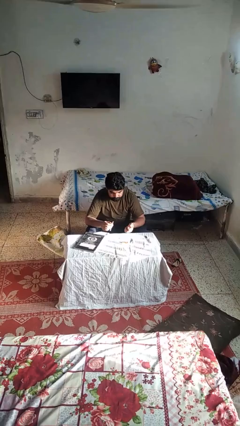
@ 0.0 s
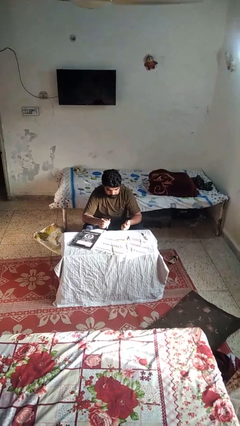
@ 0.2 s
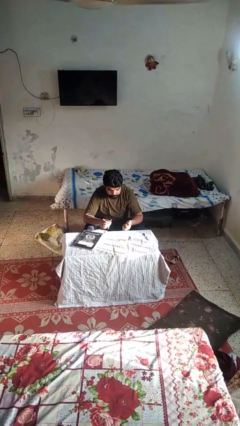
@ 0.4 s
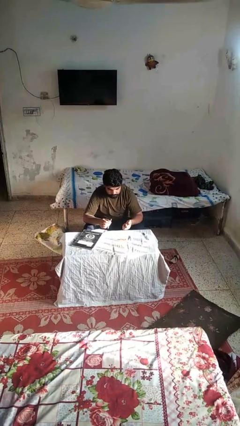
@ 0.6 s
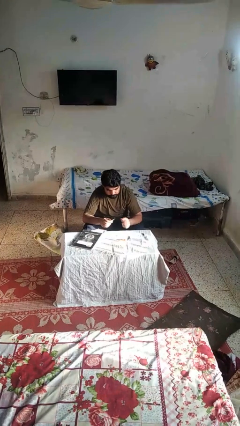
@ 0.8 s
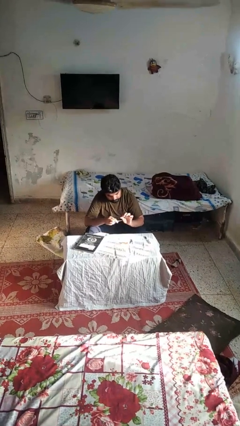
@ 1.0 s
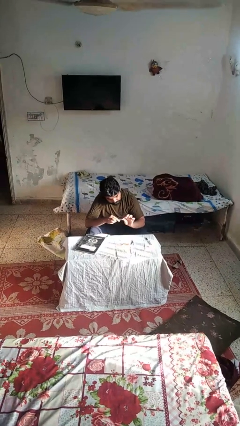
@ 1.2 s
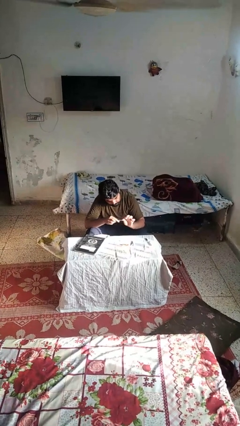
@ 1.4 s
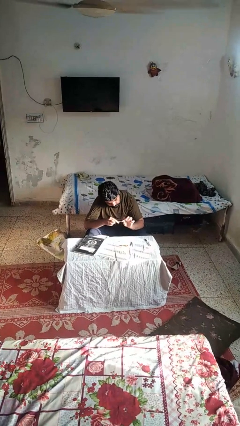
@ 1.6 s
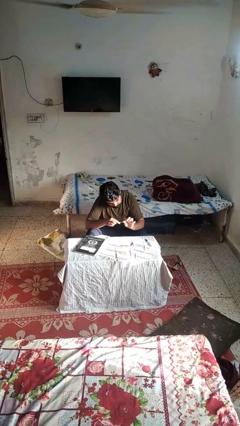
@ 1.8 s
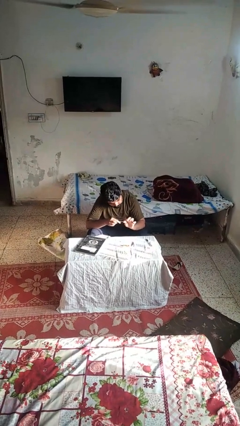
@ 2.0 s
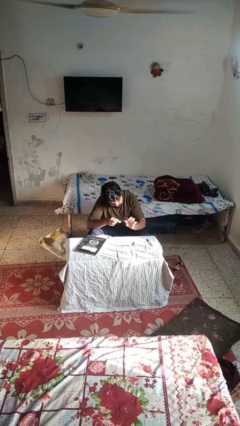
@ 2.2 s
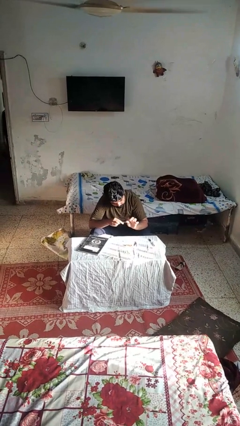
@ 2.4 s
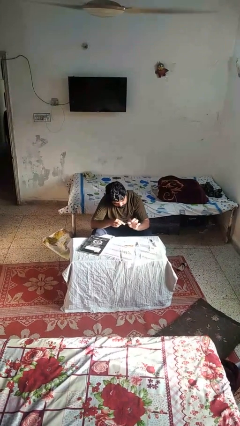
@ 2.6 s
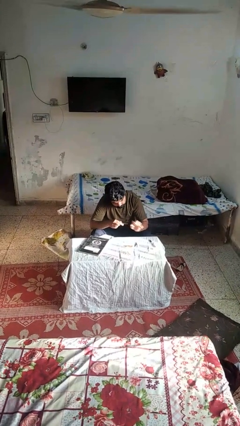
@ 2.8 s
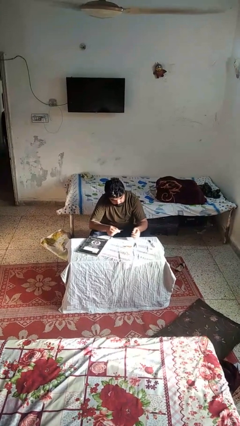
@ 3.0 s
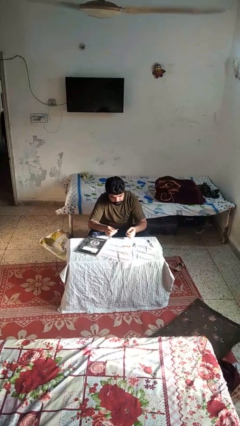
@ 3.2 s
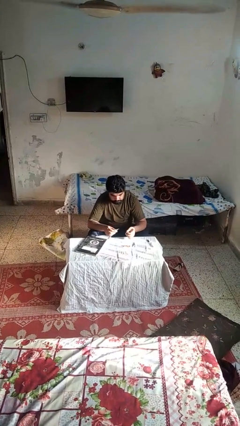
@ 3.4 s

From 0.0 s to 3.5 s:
person files fingernails

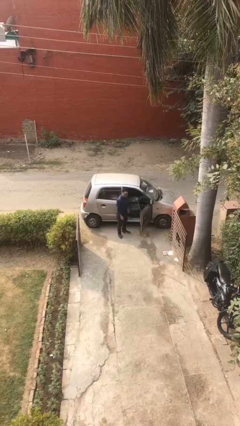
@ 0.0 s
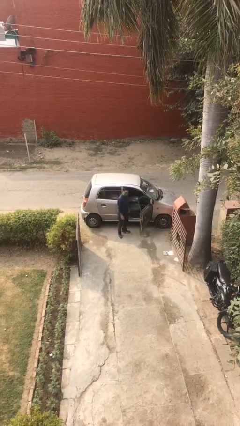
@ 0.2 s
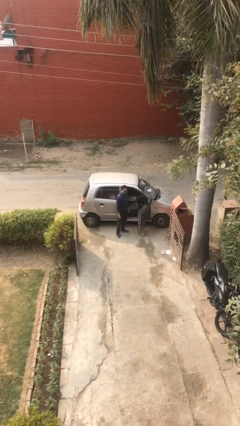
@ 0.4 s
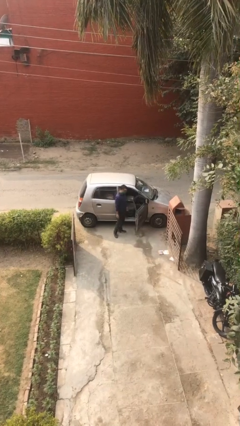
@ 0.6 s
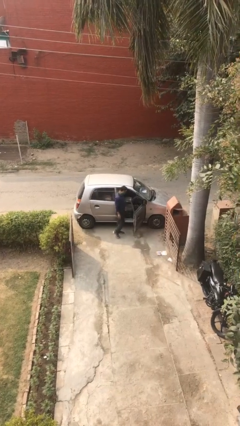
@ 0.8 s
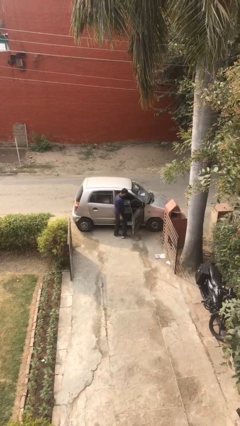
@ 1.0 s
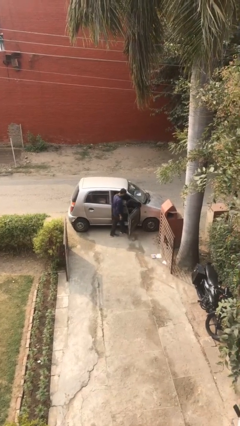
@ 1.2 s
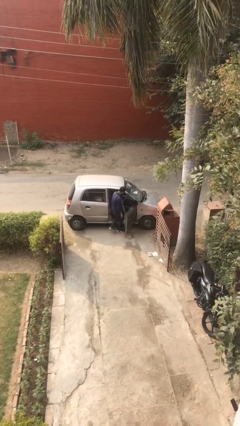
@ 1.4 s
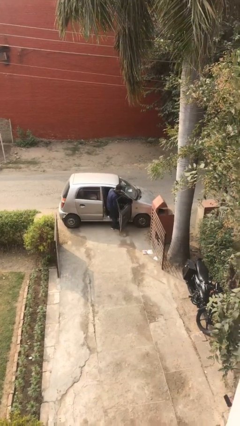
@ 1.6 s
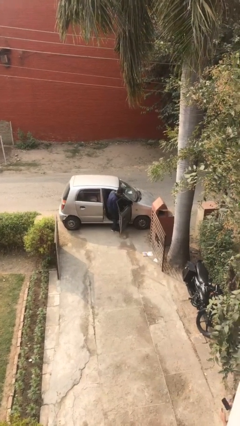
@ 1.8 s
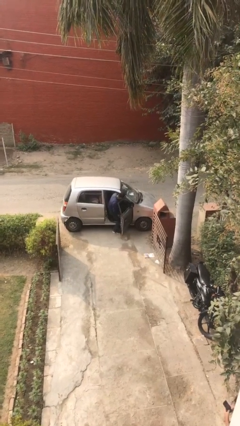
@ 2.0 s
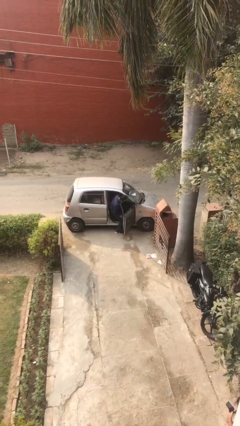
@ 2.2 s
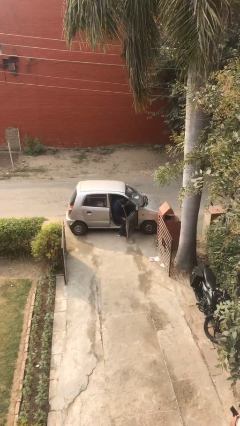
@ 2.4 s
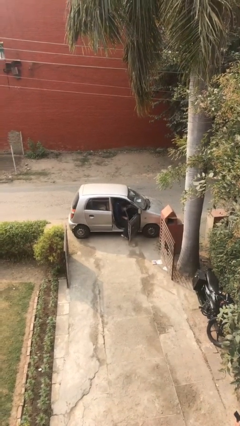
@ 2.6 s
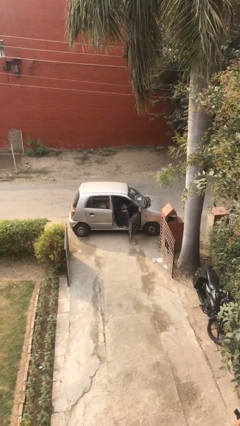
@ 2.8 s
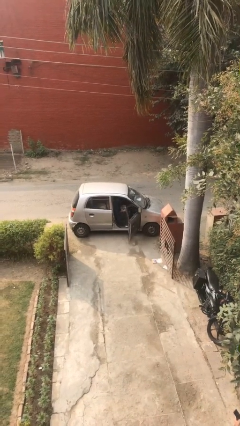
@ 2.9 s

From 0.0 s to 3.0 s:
person enters car

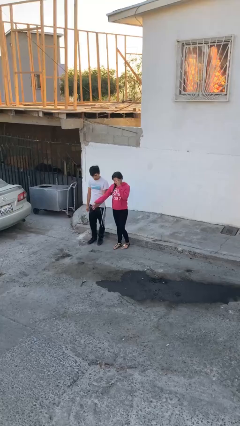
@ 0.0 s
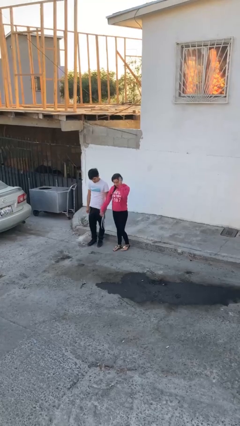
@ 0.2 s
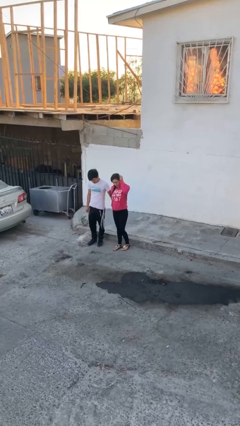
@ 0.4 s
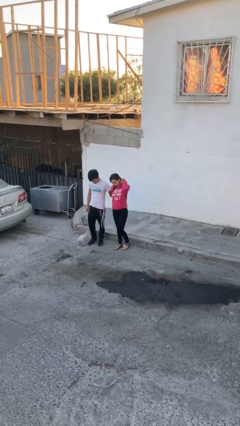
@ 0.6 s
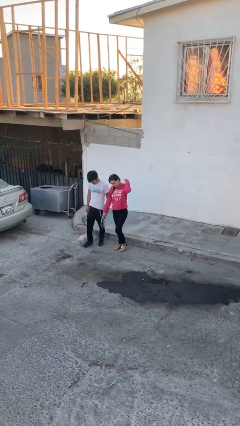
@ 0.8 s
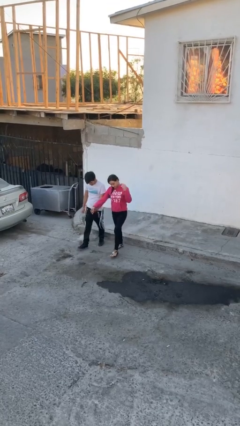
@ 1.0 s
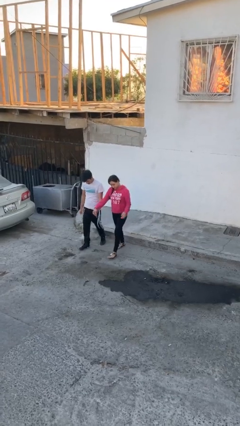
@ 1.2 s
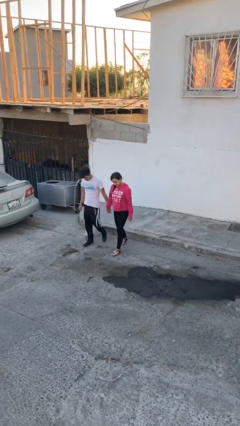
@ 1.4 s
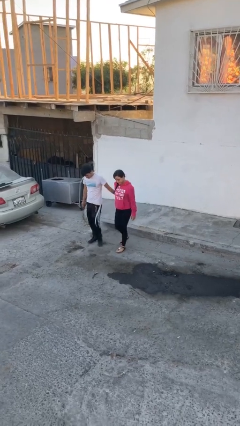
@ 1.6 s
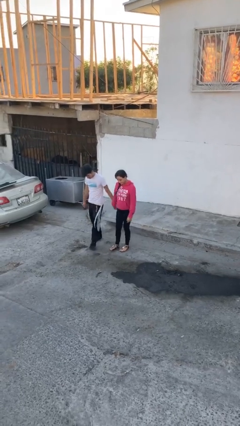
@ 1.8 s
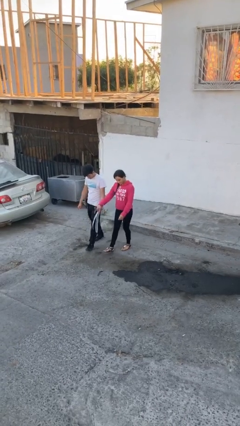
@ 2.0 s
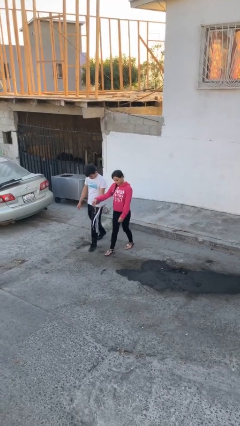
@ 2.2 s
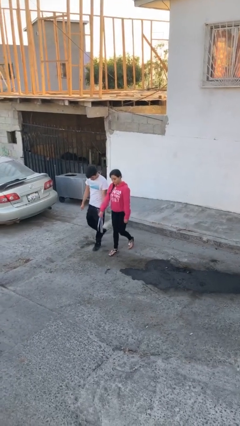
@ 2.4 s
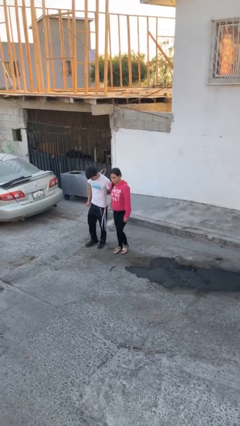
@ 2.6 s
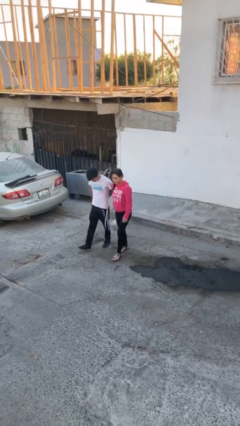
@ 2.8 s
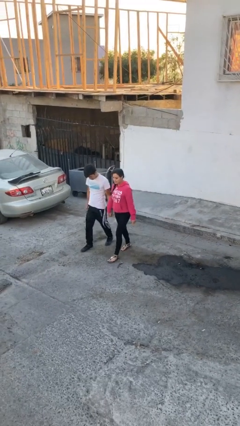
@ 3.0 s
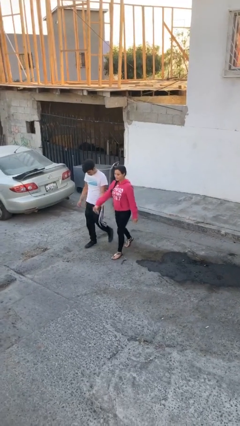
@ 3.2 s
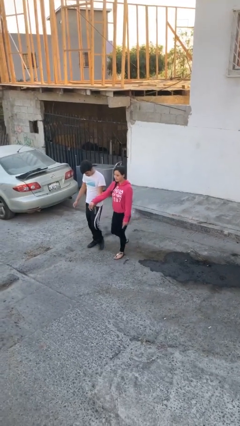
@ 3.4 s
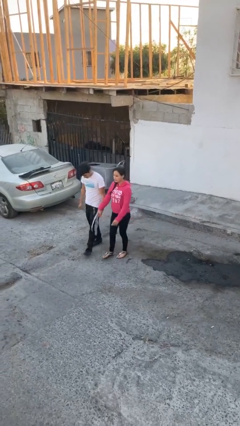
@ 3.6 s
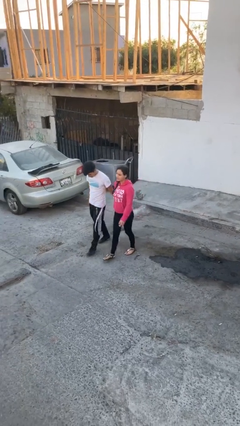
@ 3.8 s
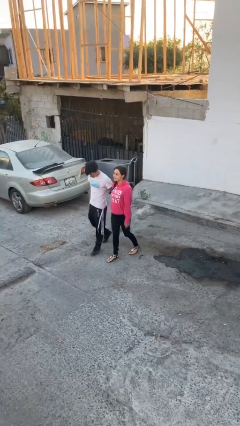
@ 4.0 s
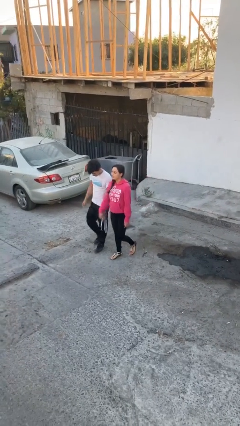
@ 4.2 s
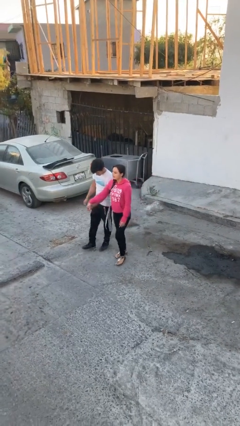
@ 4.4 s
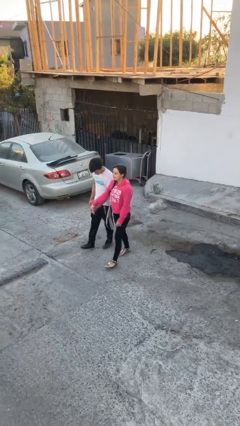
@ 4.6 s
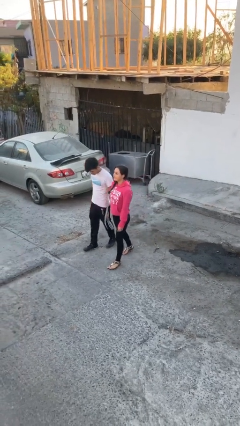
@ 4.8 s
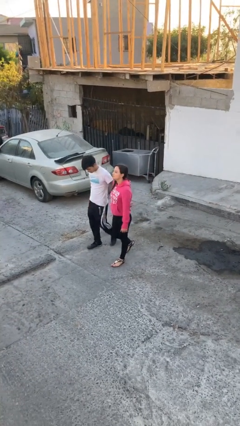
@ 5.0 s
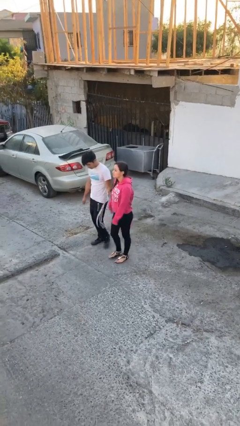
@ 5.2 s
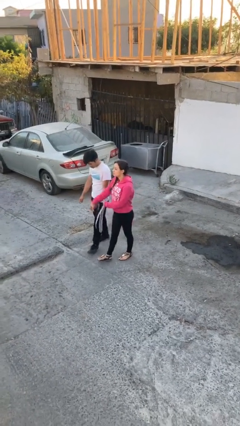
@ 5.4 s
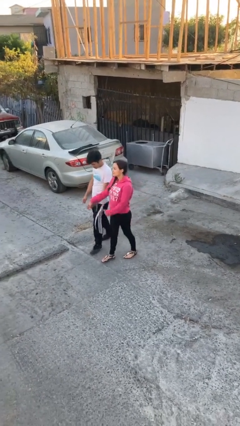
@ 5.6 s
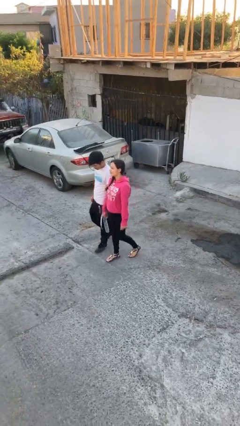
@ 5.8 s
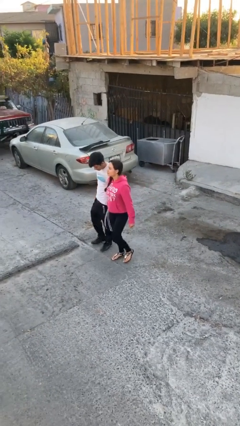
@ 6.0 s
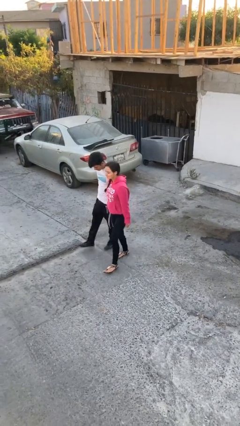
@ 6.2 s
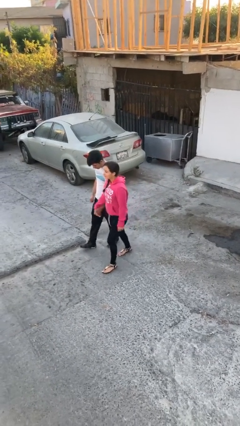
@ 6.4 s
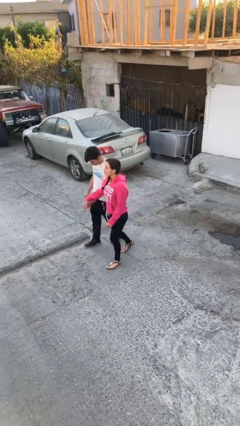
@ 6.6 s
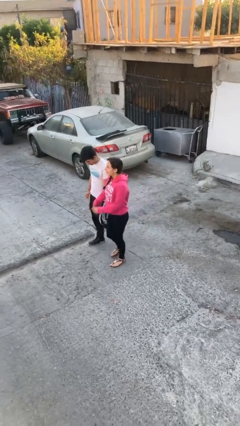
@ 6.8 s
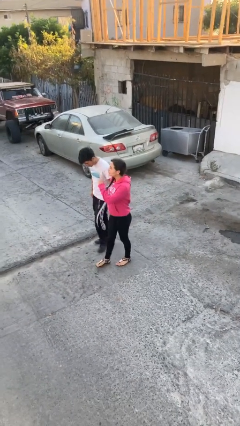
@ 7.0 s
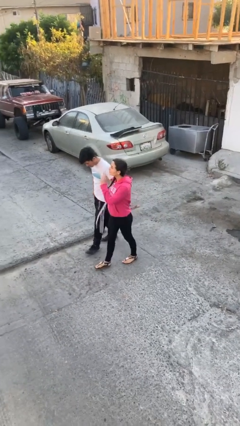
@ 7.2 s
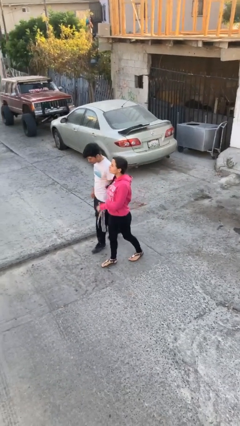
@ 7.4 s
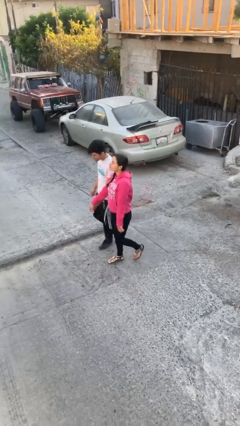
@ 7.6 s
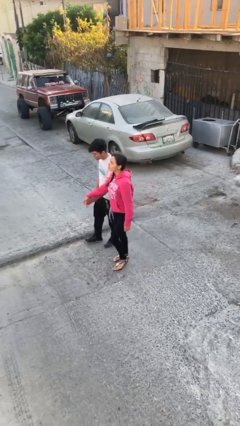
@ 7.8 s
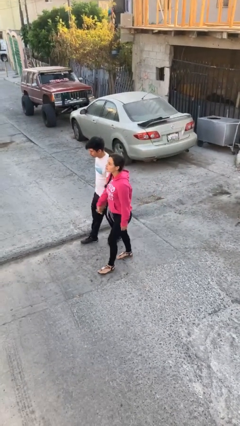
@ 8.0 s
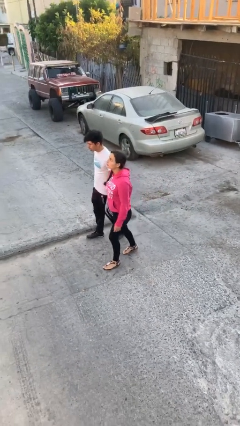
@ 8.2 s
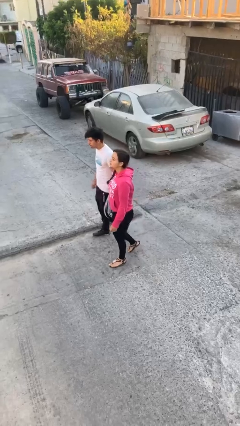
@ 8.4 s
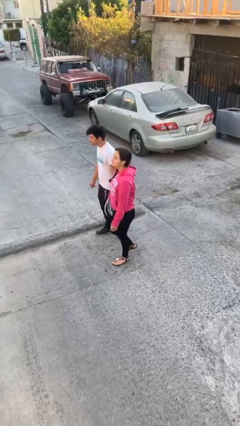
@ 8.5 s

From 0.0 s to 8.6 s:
person holds hand

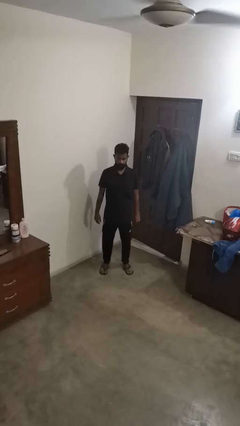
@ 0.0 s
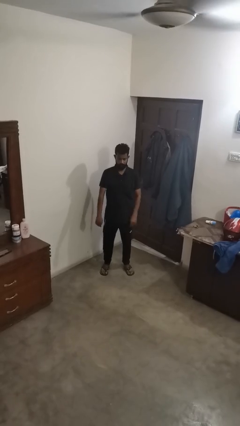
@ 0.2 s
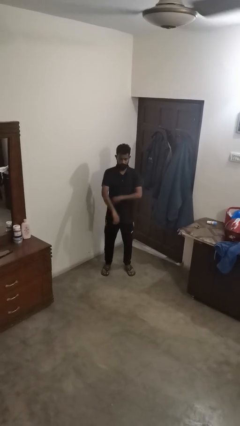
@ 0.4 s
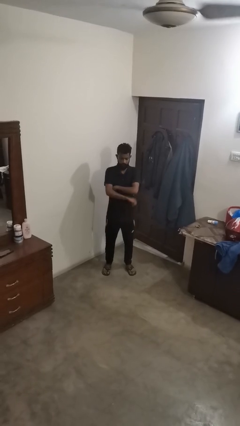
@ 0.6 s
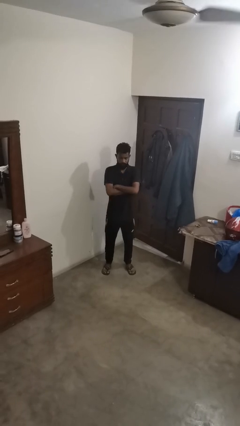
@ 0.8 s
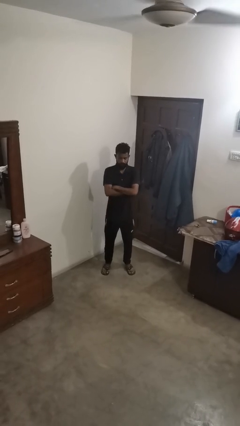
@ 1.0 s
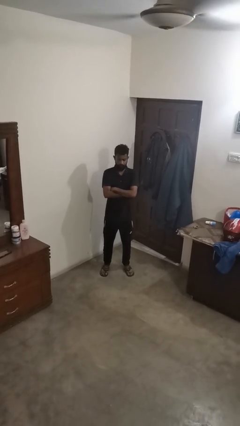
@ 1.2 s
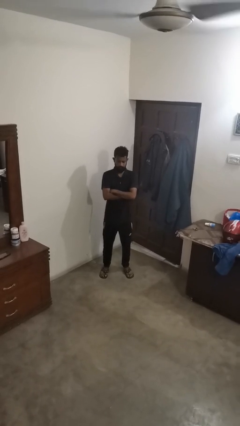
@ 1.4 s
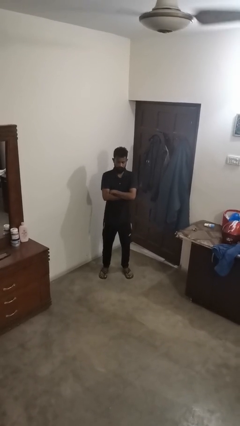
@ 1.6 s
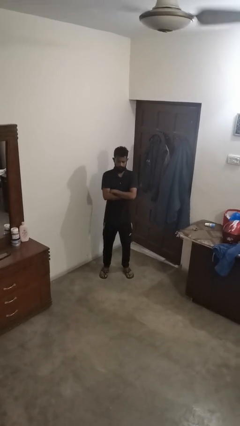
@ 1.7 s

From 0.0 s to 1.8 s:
person crosses arms

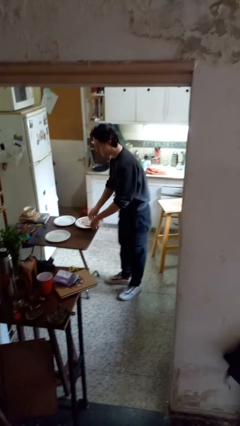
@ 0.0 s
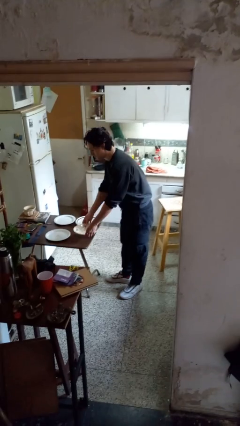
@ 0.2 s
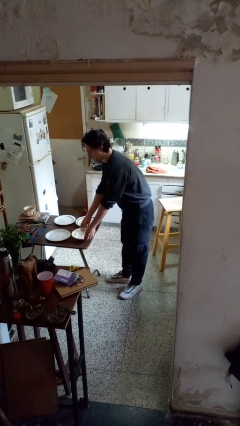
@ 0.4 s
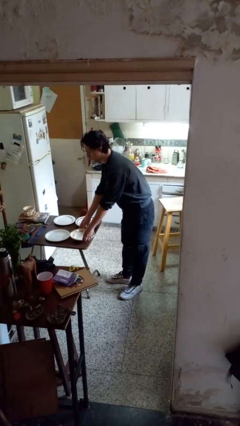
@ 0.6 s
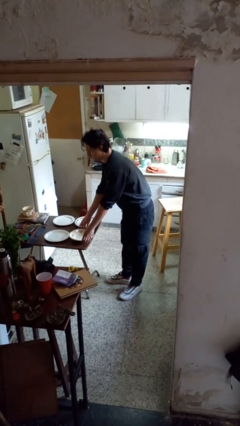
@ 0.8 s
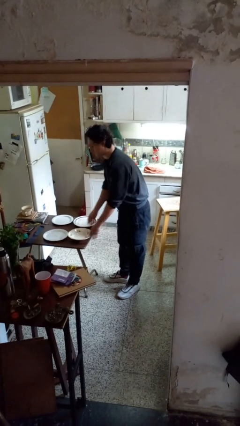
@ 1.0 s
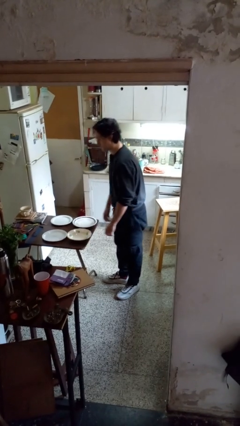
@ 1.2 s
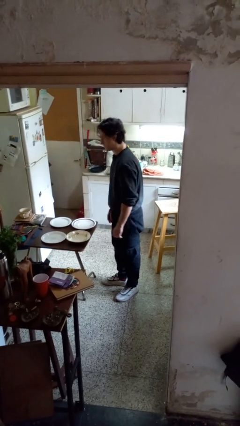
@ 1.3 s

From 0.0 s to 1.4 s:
person sets table
